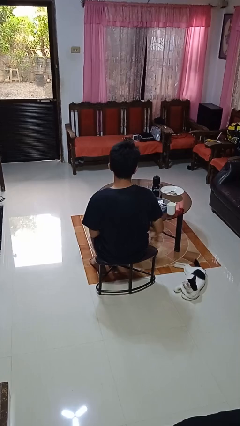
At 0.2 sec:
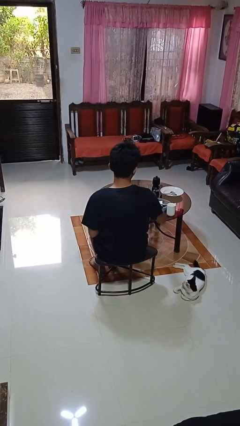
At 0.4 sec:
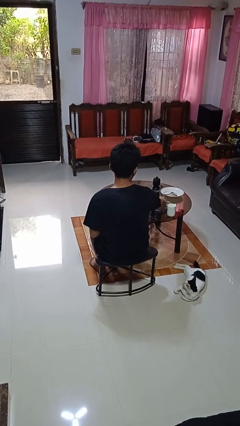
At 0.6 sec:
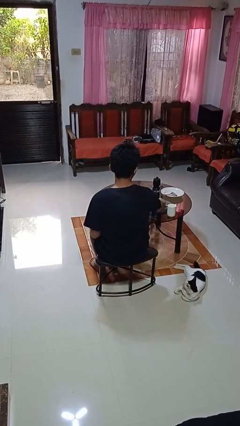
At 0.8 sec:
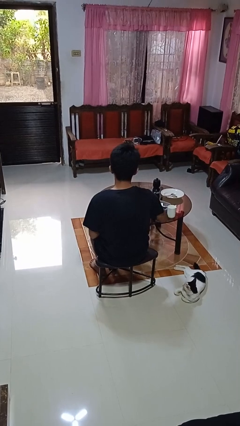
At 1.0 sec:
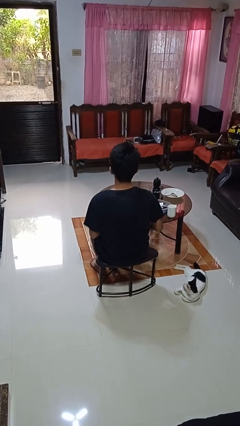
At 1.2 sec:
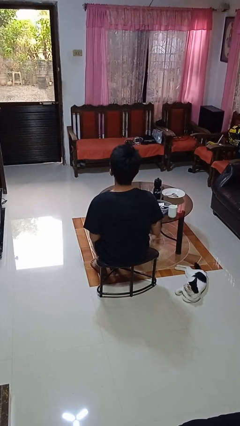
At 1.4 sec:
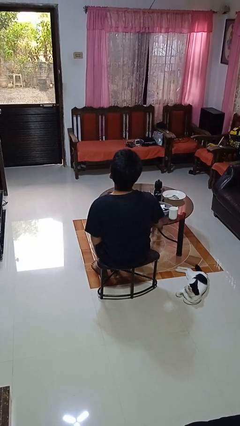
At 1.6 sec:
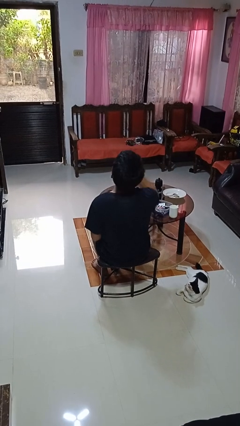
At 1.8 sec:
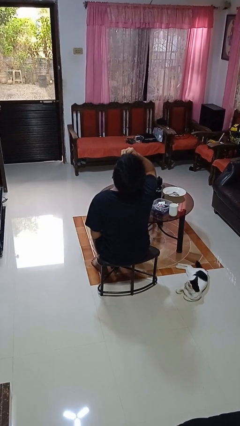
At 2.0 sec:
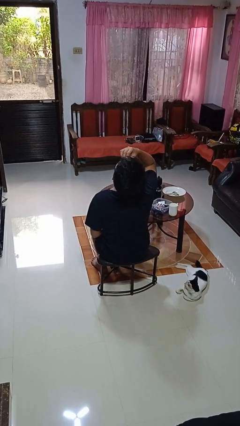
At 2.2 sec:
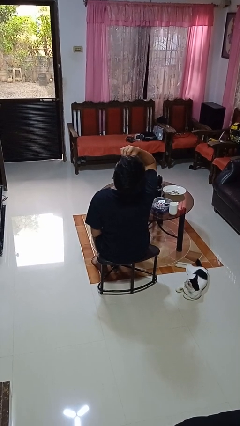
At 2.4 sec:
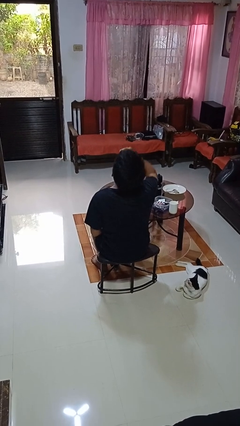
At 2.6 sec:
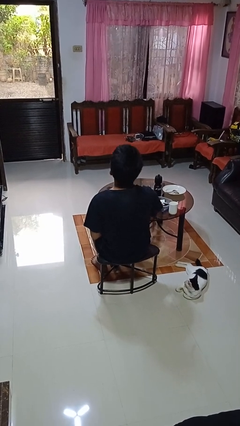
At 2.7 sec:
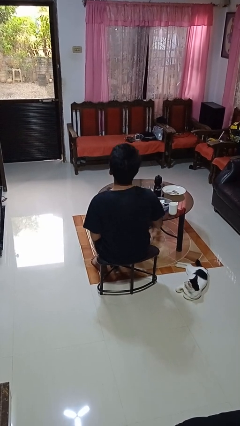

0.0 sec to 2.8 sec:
person takes medicine pills

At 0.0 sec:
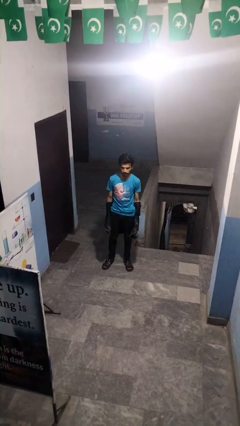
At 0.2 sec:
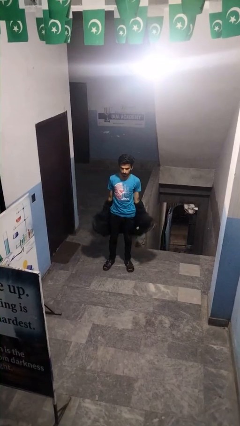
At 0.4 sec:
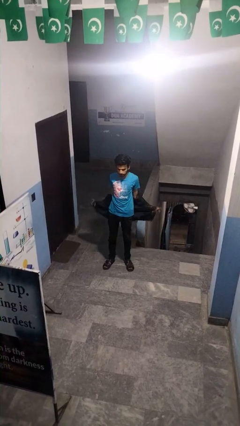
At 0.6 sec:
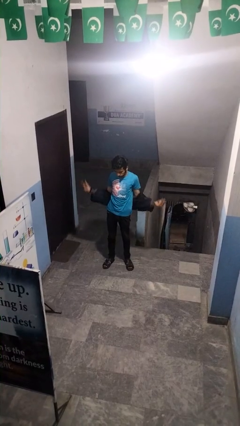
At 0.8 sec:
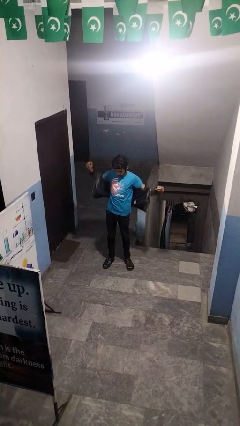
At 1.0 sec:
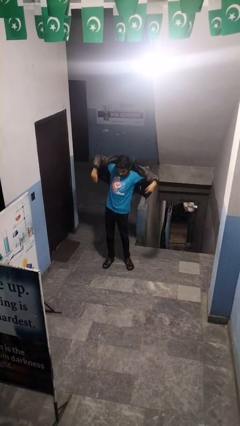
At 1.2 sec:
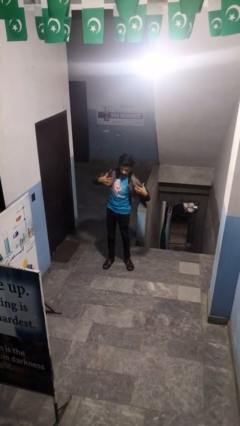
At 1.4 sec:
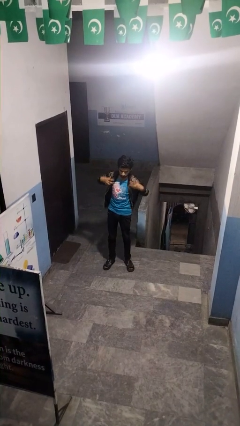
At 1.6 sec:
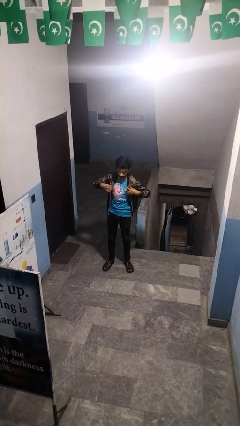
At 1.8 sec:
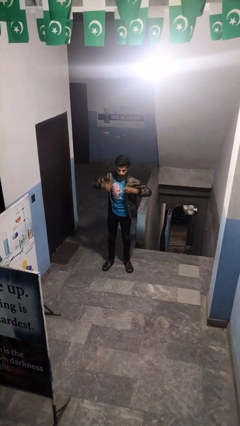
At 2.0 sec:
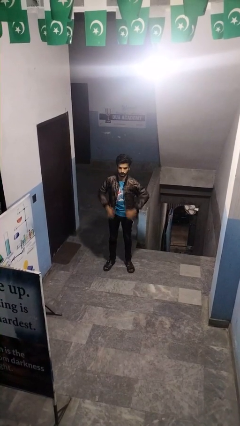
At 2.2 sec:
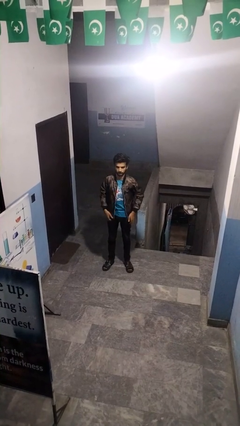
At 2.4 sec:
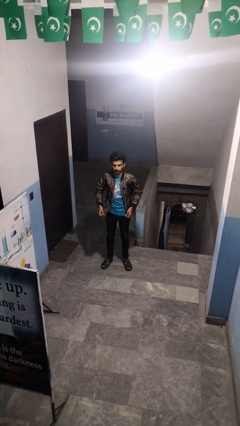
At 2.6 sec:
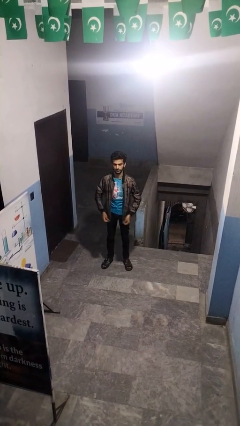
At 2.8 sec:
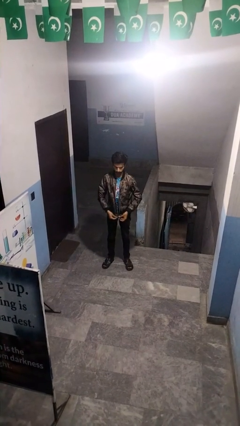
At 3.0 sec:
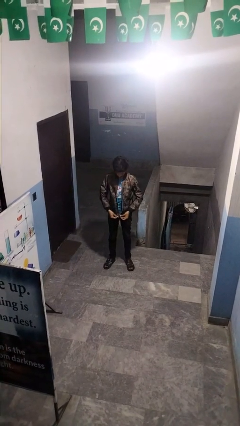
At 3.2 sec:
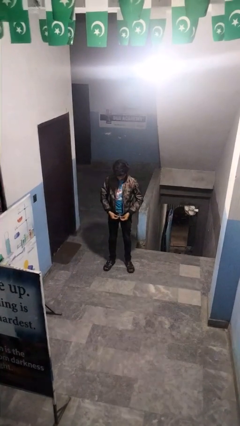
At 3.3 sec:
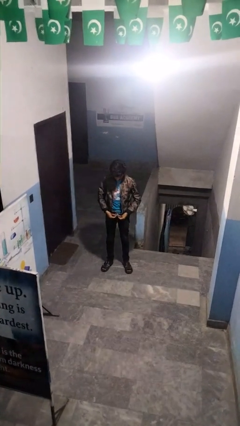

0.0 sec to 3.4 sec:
person puts on jacket

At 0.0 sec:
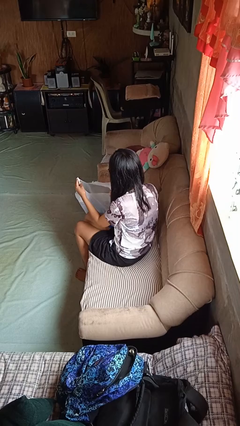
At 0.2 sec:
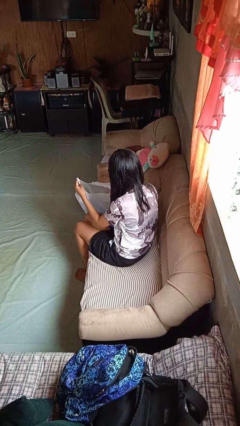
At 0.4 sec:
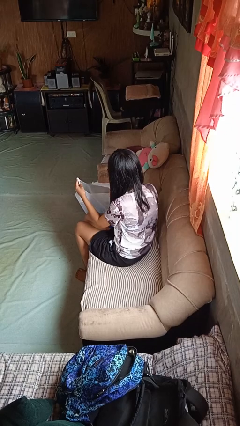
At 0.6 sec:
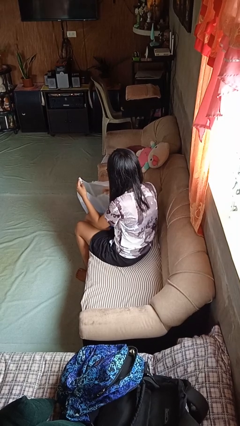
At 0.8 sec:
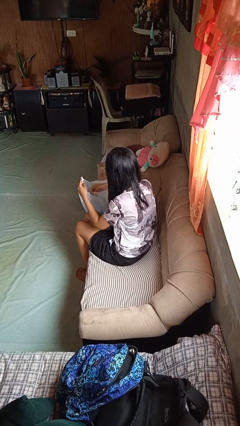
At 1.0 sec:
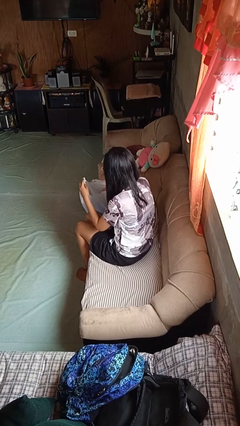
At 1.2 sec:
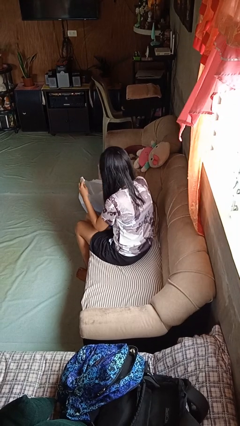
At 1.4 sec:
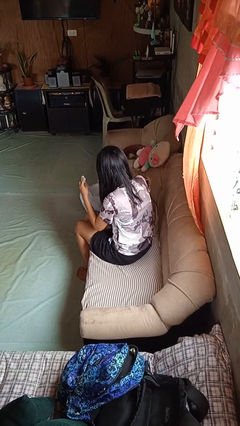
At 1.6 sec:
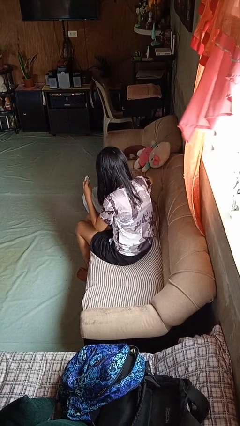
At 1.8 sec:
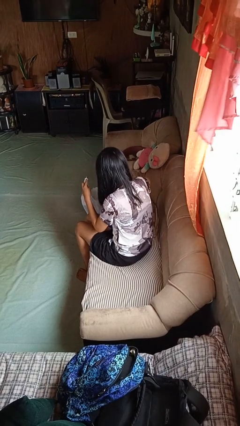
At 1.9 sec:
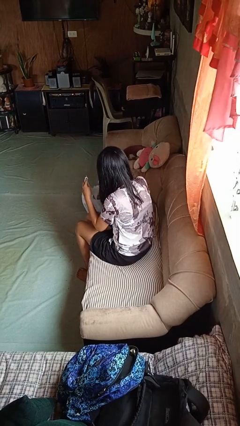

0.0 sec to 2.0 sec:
person searches in bag

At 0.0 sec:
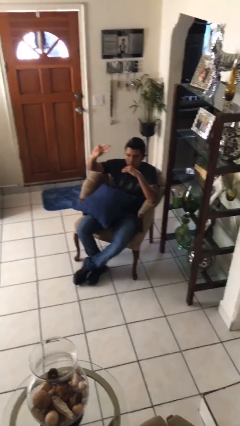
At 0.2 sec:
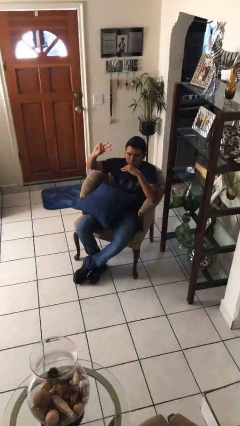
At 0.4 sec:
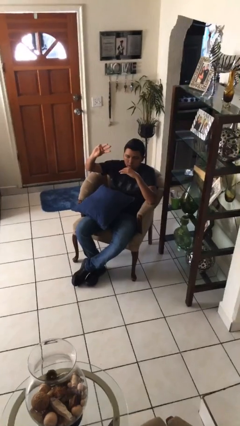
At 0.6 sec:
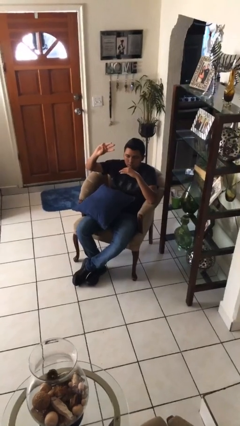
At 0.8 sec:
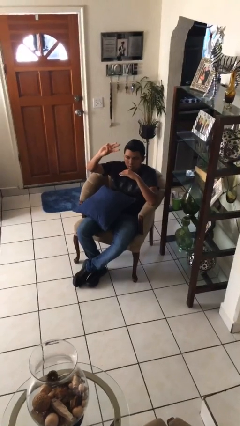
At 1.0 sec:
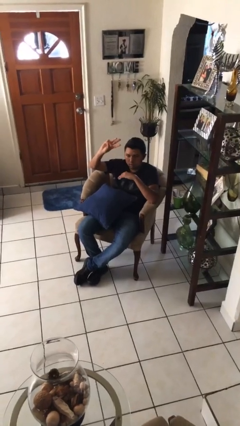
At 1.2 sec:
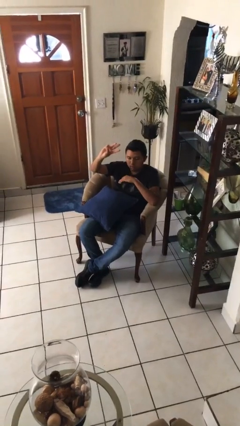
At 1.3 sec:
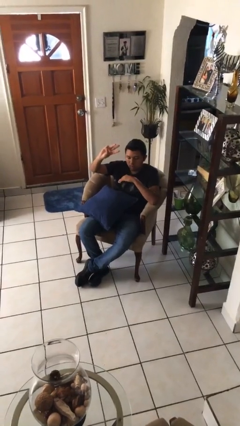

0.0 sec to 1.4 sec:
person gestures number three

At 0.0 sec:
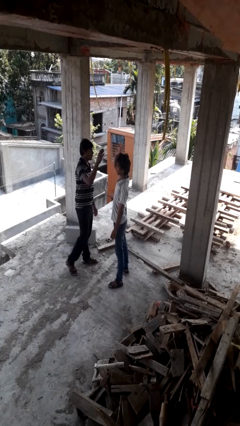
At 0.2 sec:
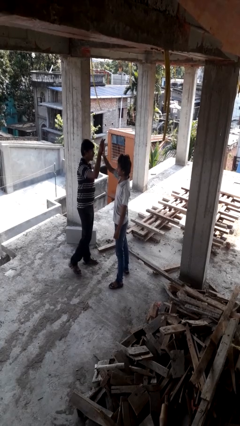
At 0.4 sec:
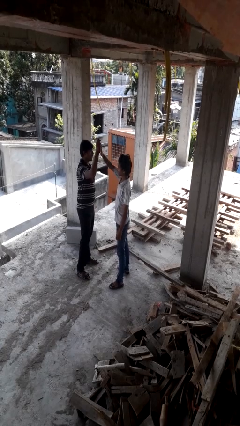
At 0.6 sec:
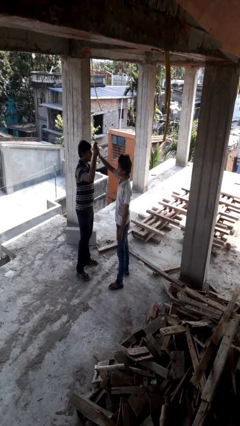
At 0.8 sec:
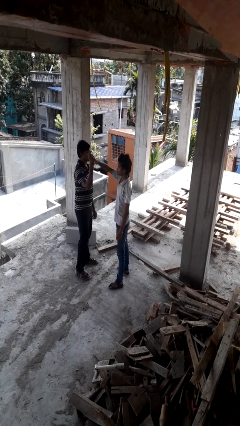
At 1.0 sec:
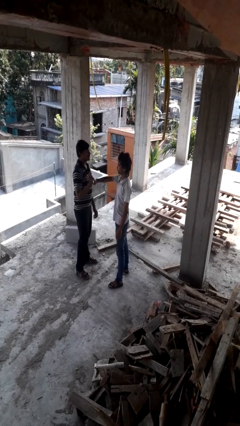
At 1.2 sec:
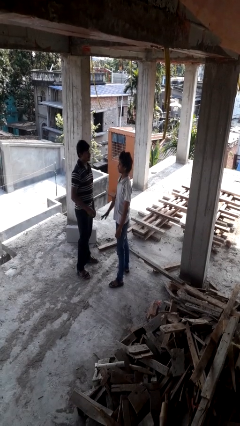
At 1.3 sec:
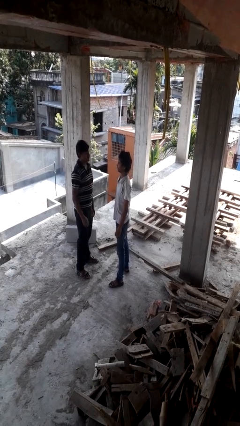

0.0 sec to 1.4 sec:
person highfives hand

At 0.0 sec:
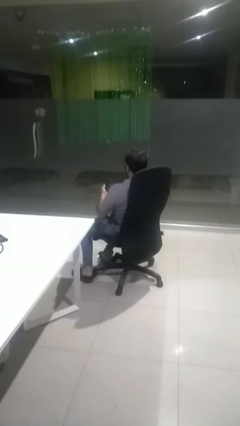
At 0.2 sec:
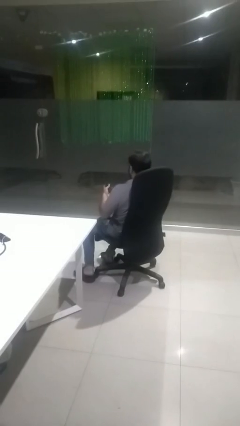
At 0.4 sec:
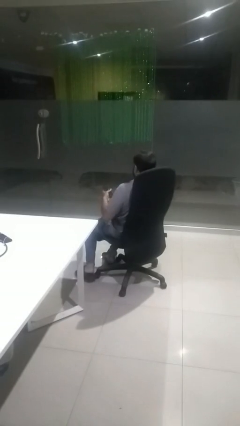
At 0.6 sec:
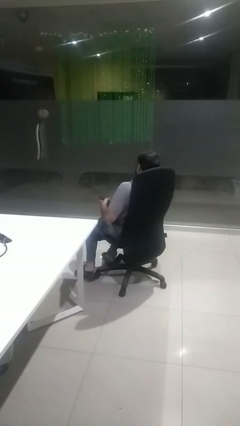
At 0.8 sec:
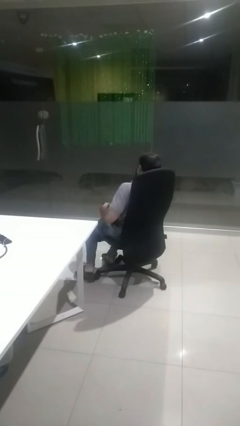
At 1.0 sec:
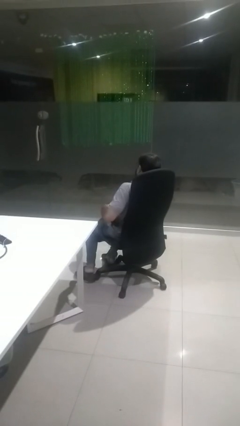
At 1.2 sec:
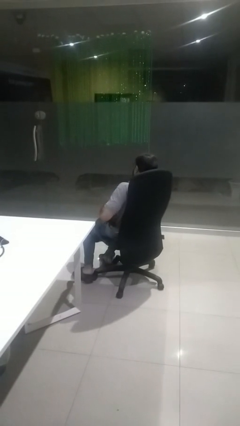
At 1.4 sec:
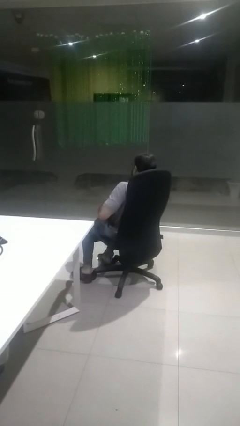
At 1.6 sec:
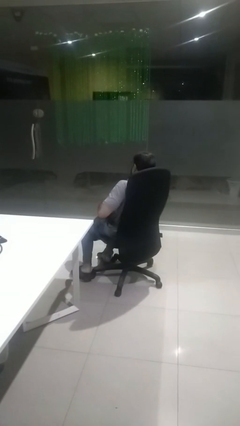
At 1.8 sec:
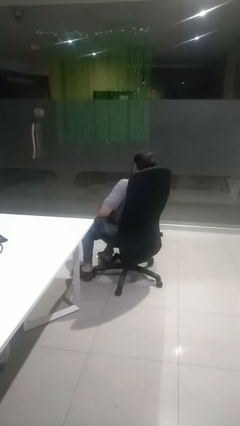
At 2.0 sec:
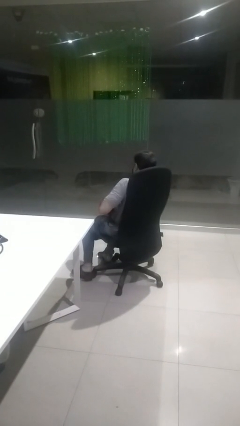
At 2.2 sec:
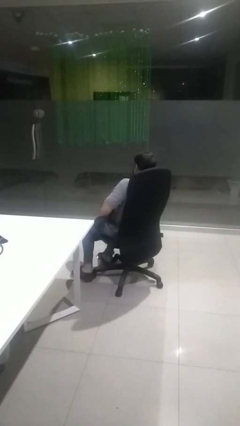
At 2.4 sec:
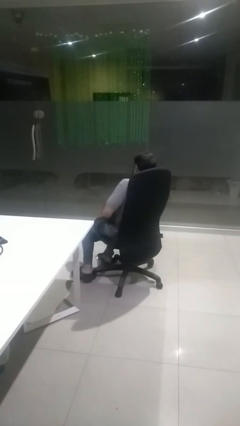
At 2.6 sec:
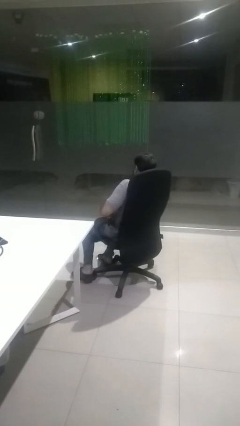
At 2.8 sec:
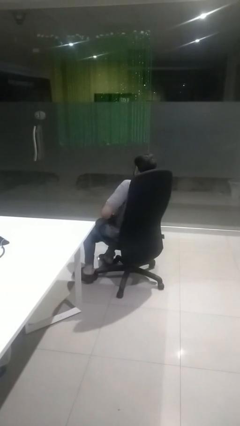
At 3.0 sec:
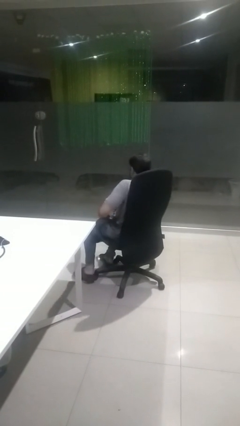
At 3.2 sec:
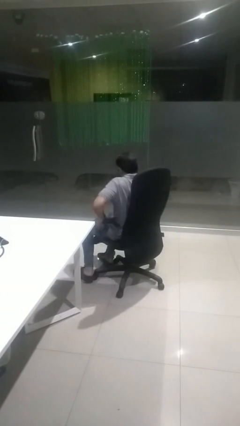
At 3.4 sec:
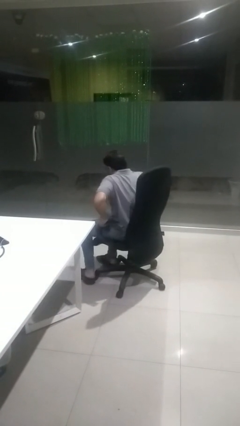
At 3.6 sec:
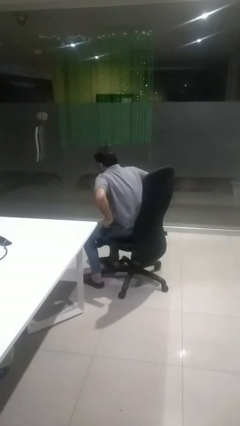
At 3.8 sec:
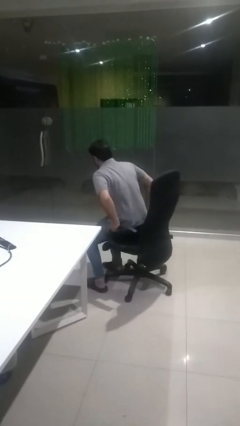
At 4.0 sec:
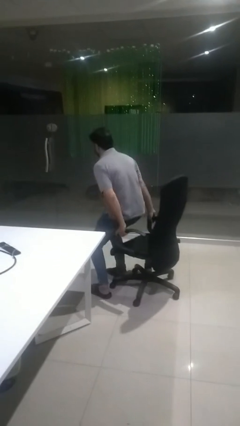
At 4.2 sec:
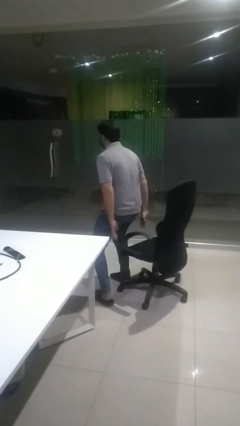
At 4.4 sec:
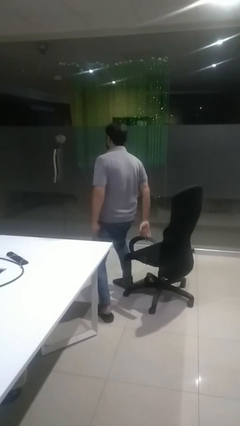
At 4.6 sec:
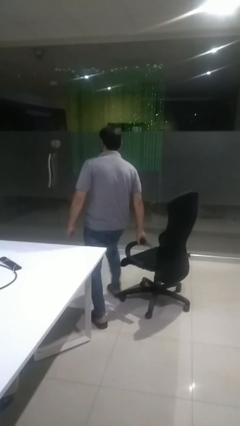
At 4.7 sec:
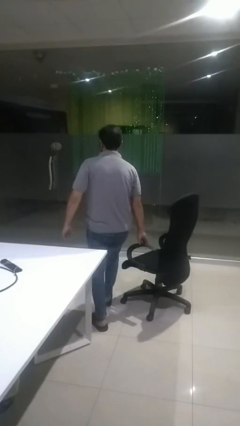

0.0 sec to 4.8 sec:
person puts phone into pocket

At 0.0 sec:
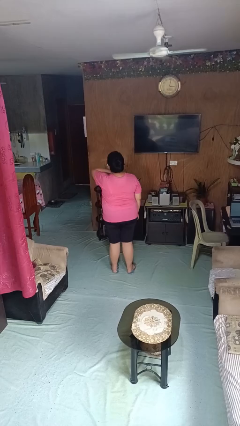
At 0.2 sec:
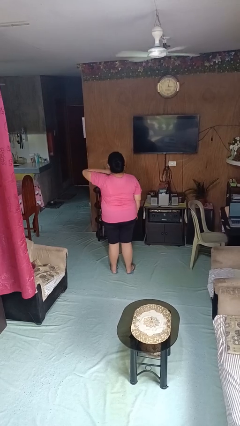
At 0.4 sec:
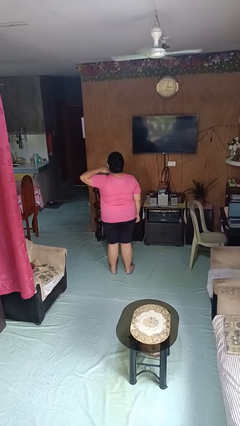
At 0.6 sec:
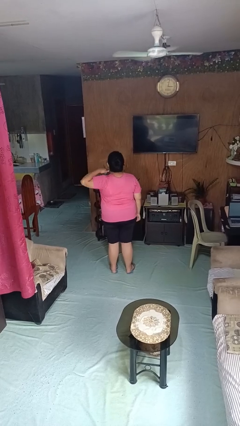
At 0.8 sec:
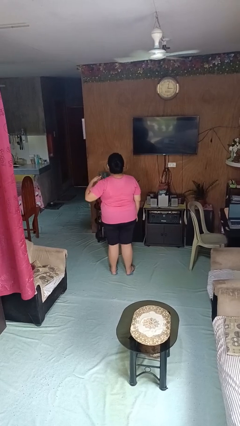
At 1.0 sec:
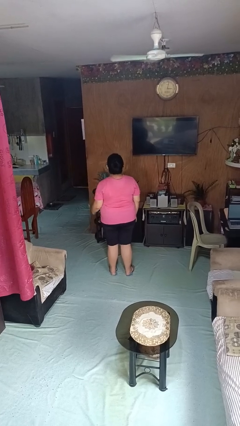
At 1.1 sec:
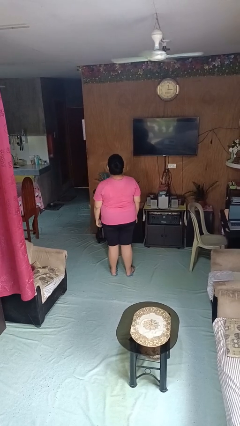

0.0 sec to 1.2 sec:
person gestures cut
